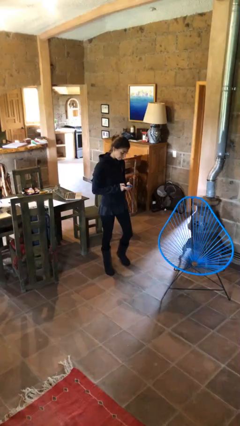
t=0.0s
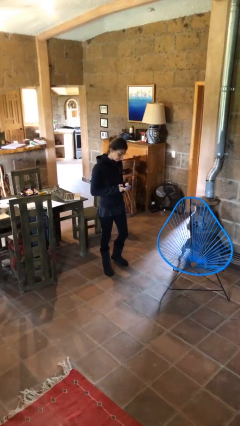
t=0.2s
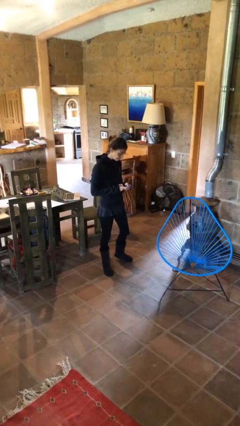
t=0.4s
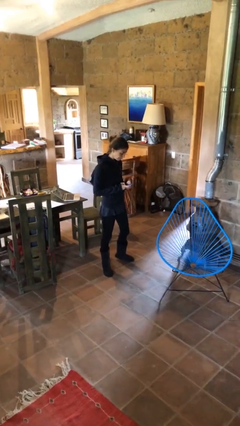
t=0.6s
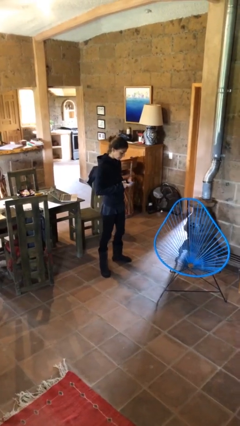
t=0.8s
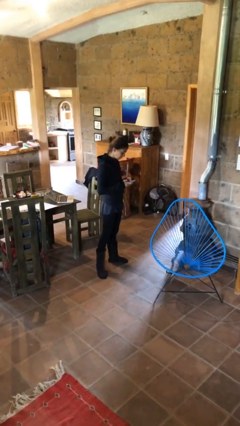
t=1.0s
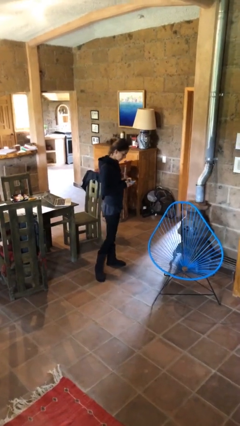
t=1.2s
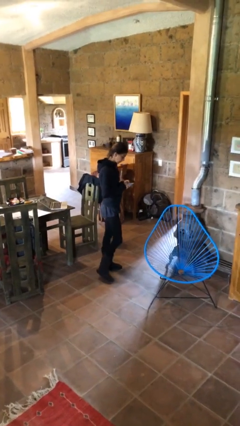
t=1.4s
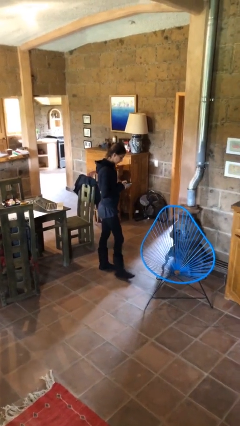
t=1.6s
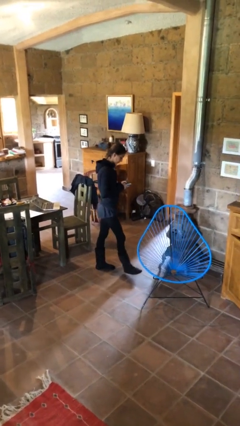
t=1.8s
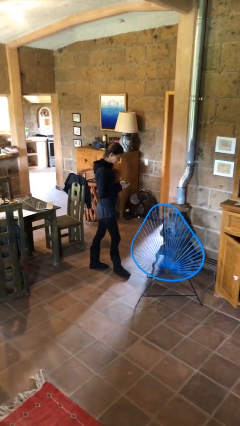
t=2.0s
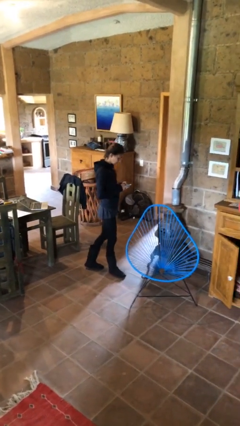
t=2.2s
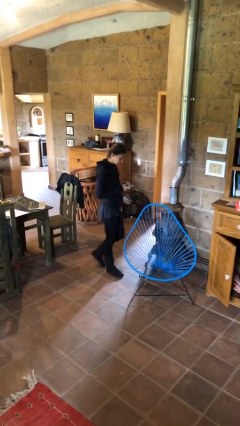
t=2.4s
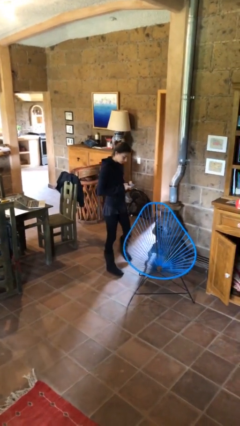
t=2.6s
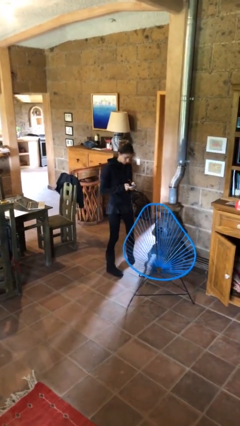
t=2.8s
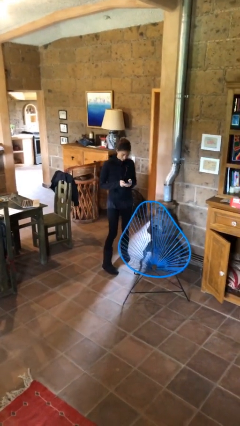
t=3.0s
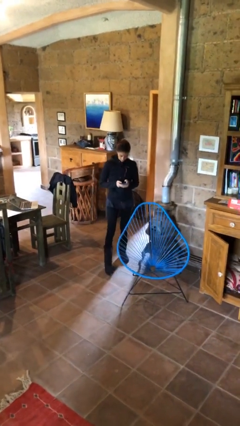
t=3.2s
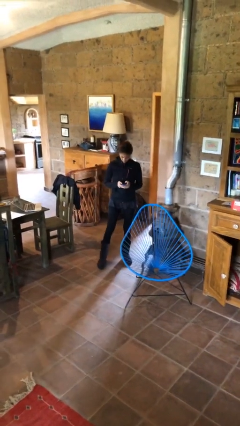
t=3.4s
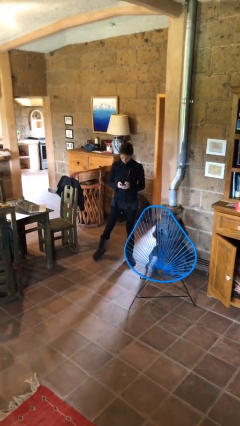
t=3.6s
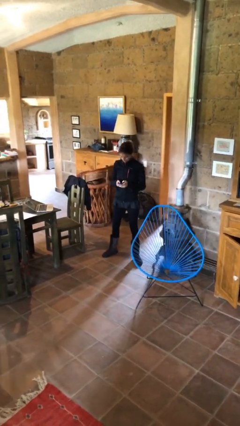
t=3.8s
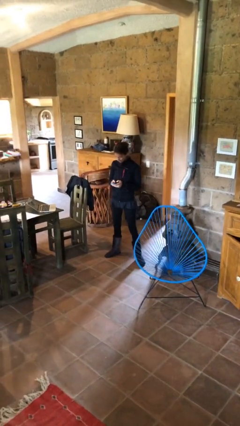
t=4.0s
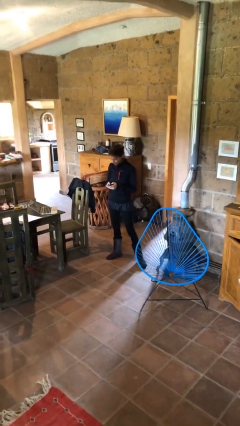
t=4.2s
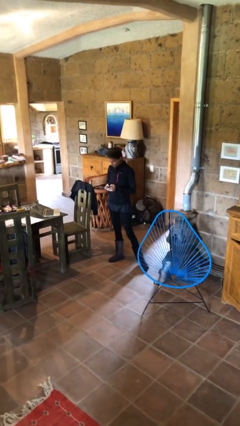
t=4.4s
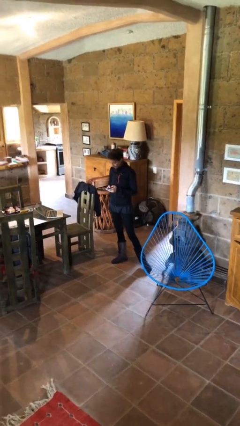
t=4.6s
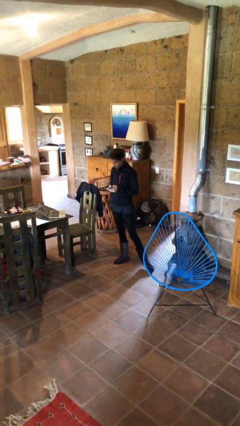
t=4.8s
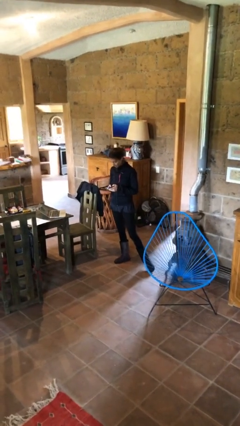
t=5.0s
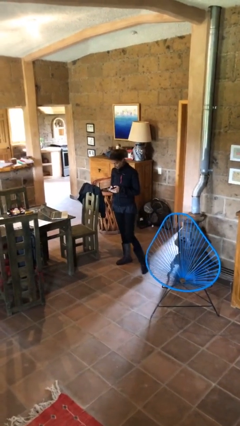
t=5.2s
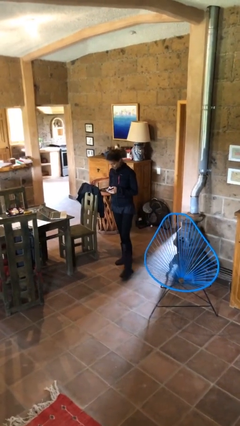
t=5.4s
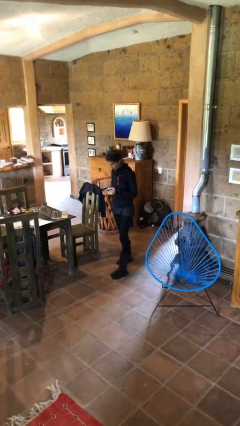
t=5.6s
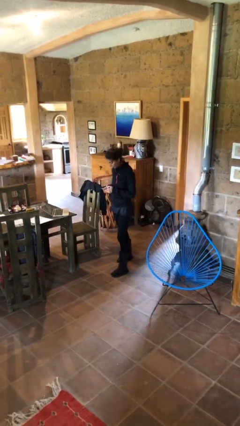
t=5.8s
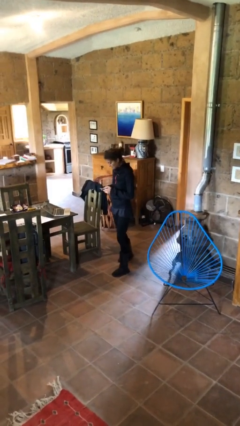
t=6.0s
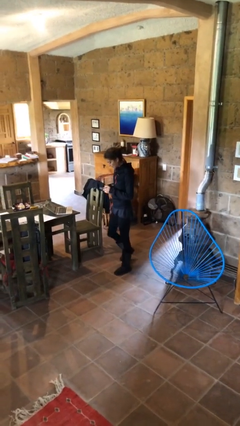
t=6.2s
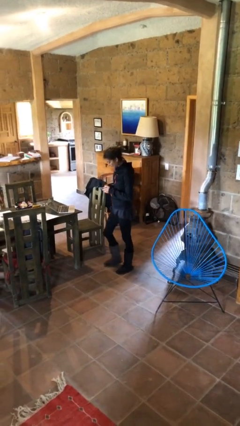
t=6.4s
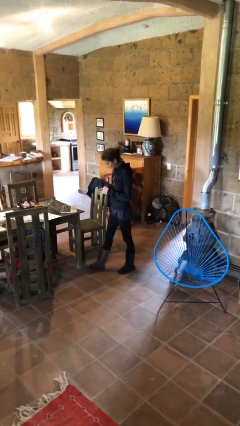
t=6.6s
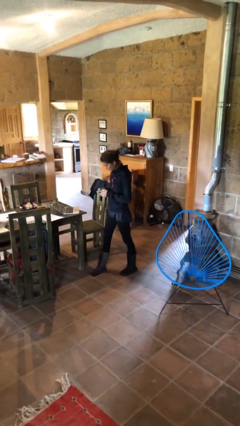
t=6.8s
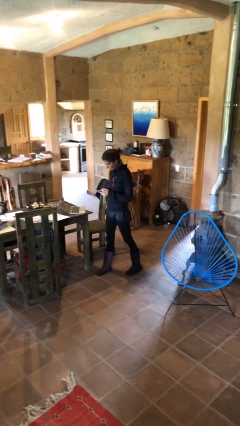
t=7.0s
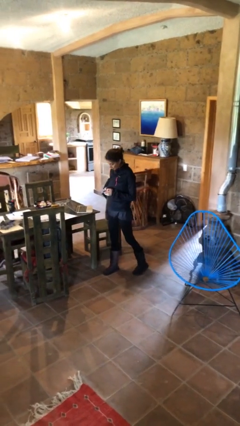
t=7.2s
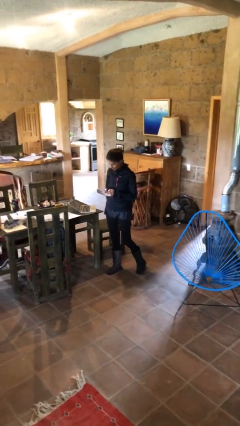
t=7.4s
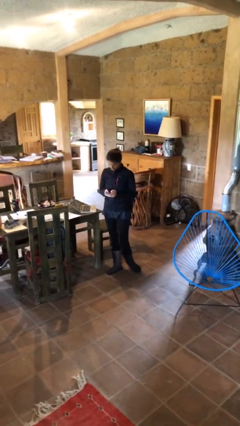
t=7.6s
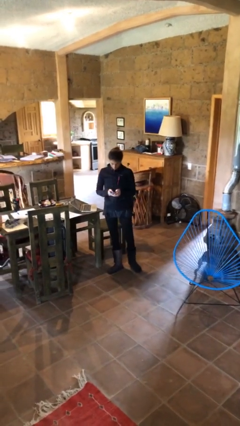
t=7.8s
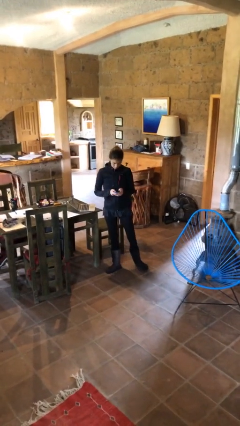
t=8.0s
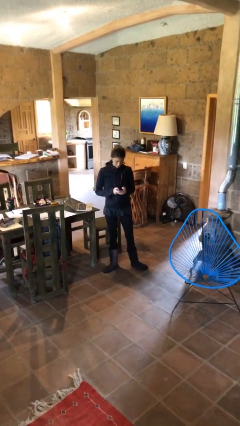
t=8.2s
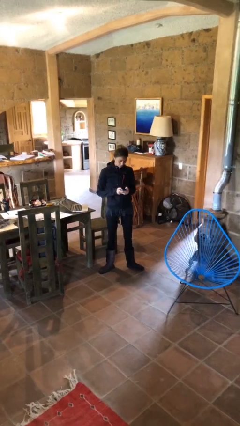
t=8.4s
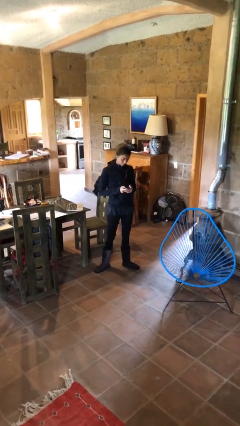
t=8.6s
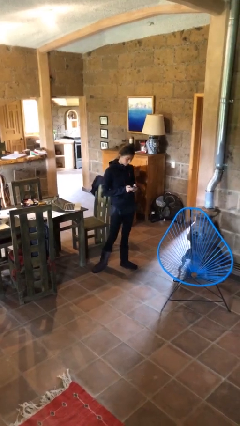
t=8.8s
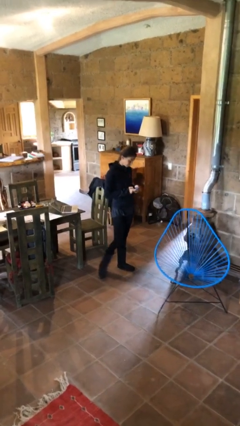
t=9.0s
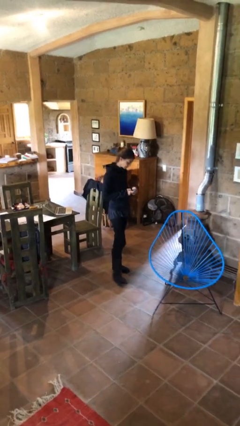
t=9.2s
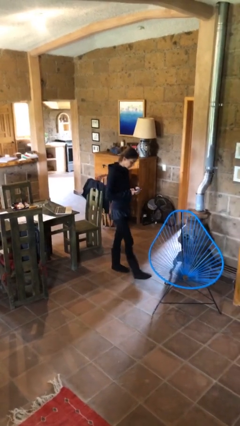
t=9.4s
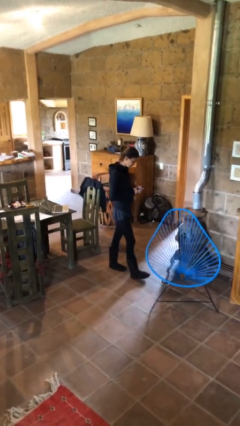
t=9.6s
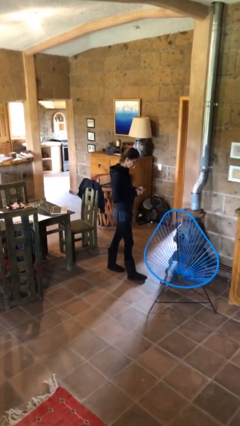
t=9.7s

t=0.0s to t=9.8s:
person texts on phone

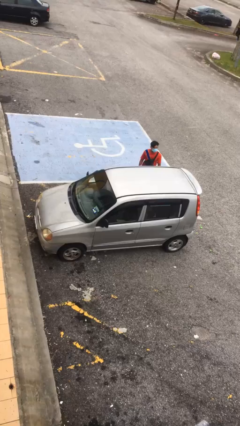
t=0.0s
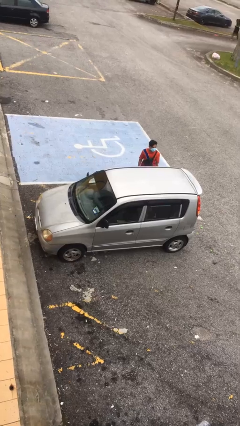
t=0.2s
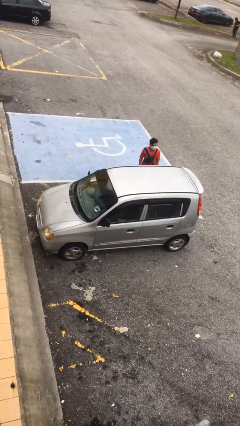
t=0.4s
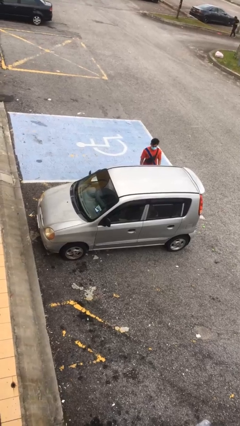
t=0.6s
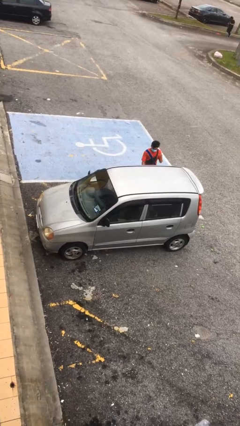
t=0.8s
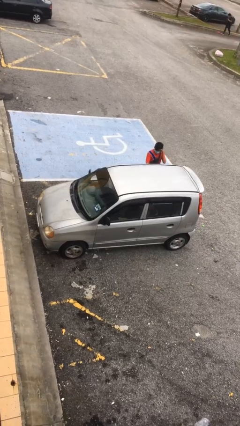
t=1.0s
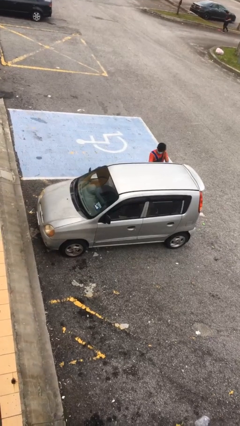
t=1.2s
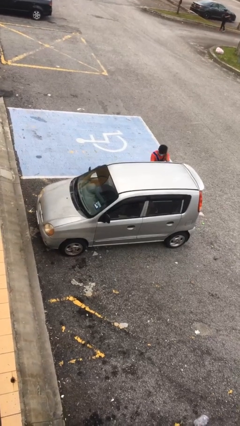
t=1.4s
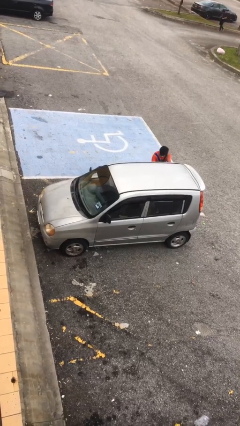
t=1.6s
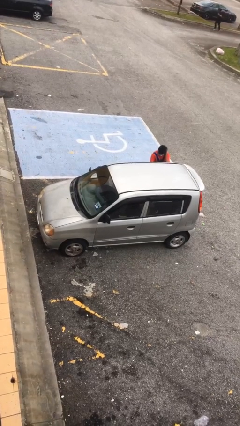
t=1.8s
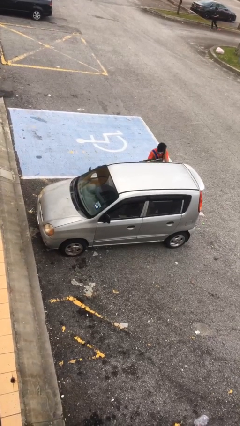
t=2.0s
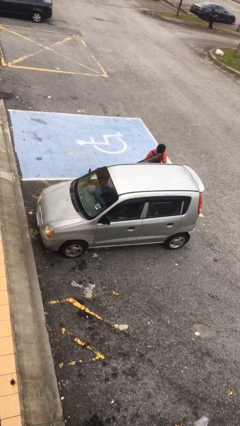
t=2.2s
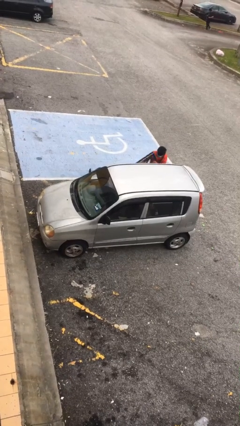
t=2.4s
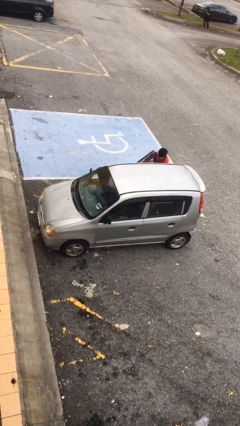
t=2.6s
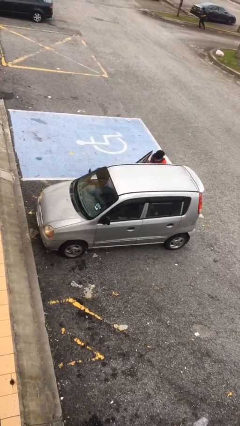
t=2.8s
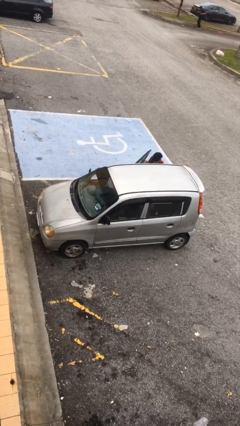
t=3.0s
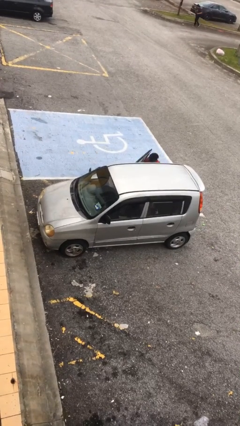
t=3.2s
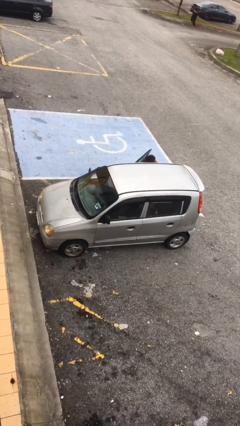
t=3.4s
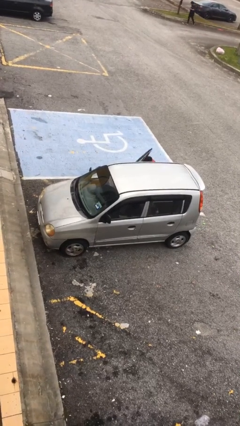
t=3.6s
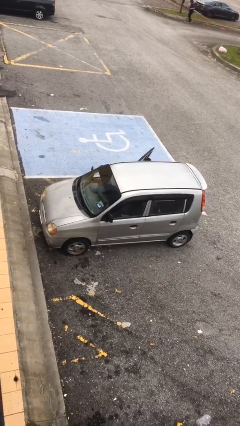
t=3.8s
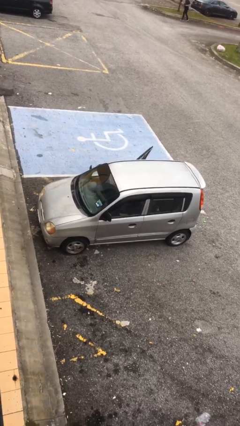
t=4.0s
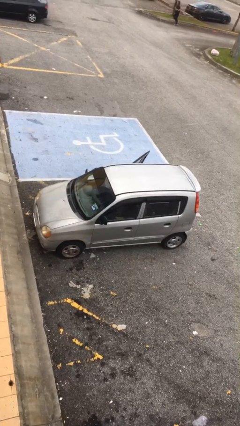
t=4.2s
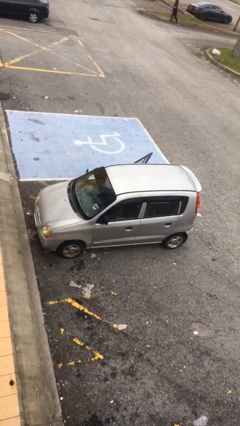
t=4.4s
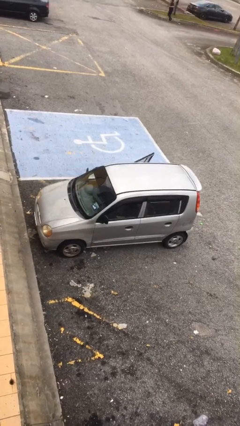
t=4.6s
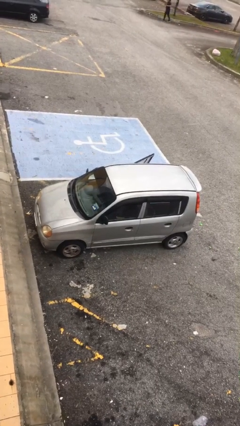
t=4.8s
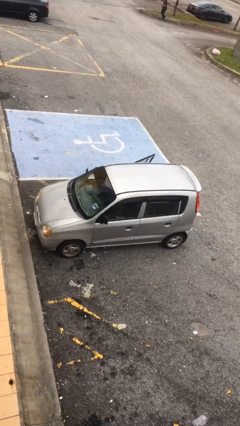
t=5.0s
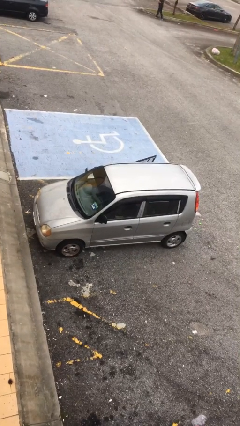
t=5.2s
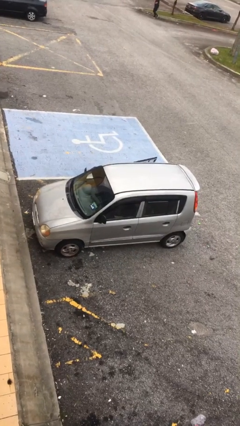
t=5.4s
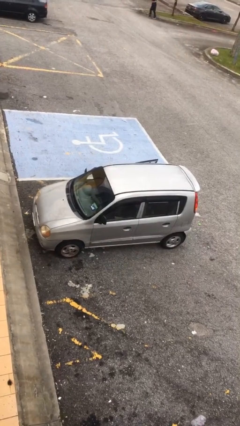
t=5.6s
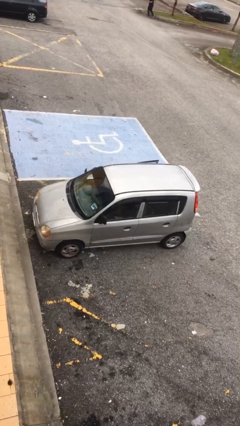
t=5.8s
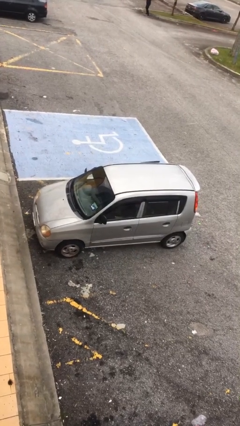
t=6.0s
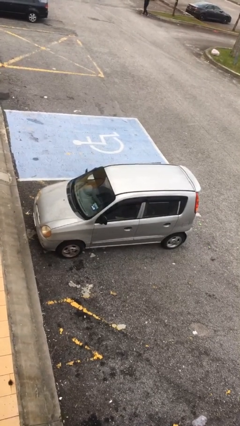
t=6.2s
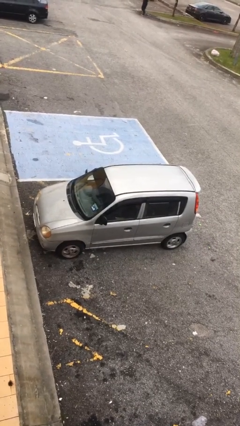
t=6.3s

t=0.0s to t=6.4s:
car picks up person

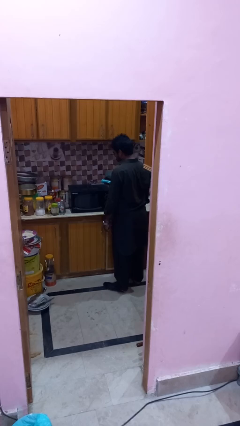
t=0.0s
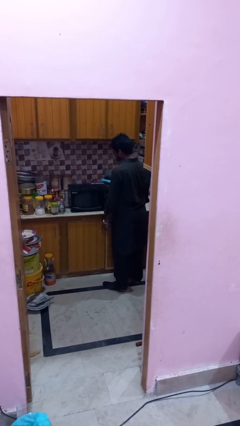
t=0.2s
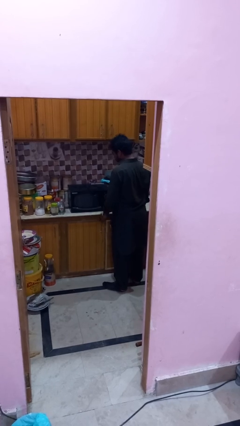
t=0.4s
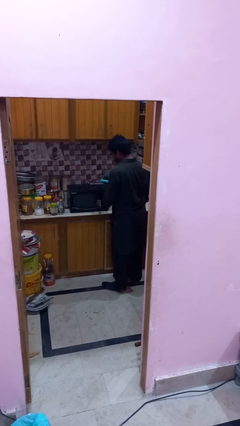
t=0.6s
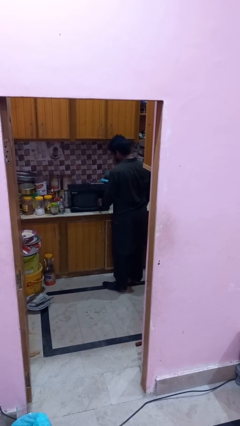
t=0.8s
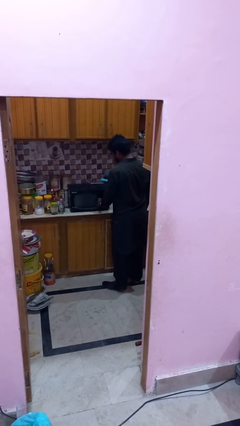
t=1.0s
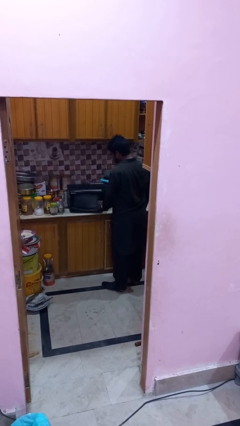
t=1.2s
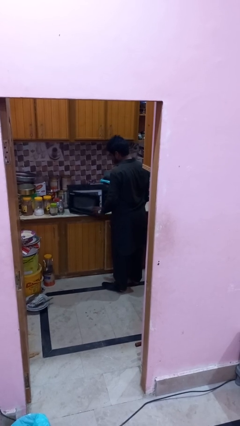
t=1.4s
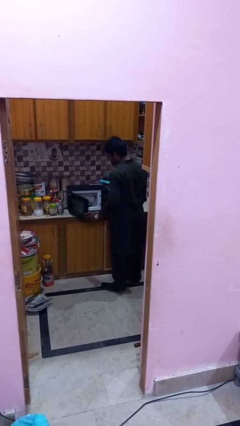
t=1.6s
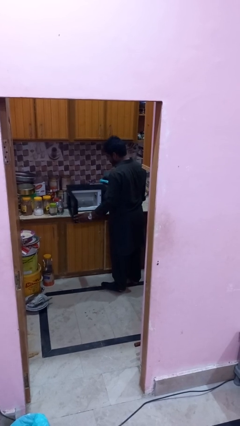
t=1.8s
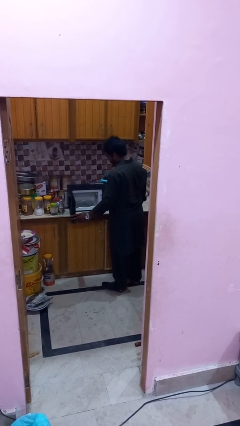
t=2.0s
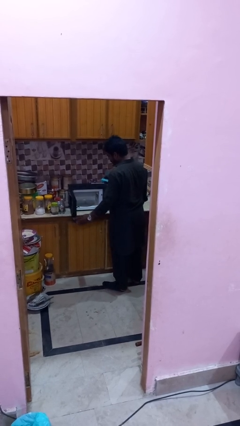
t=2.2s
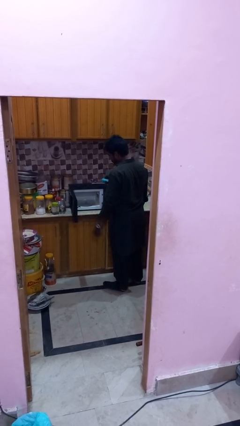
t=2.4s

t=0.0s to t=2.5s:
person opens oven door
